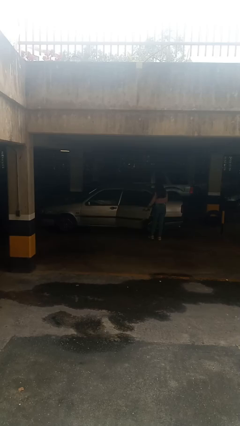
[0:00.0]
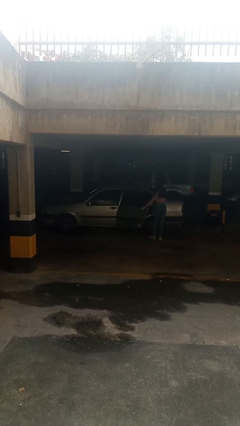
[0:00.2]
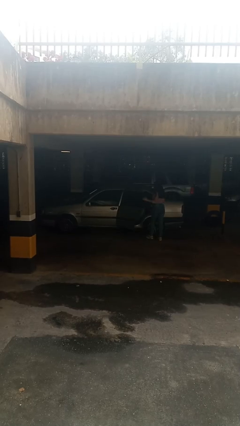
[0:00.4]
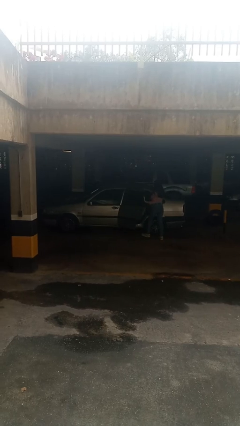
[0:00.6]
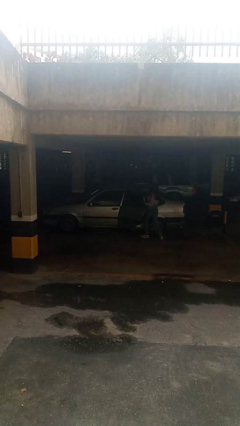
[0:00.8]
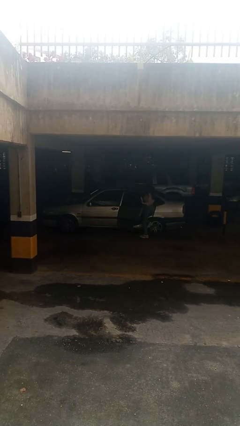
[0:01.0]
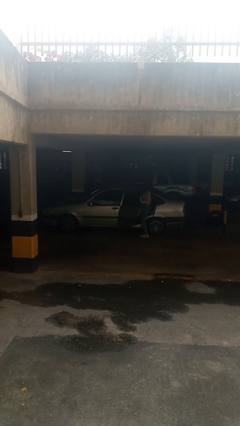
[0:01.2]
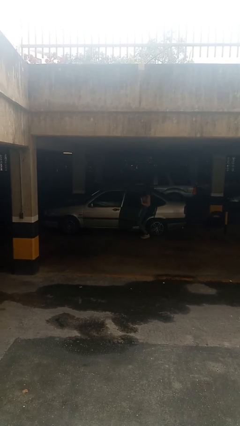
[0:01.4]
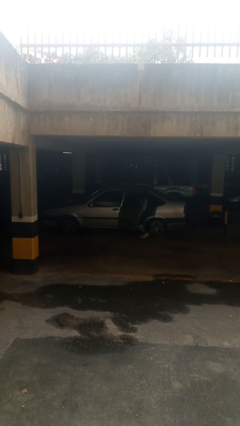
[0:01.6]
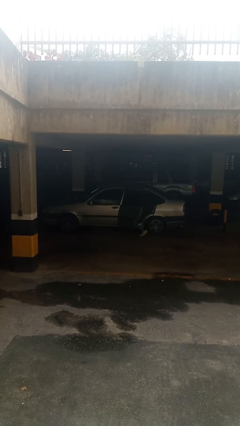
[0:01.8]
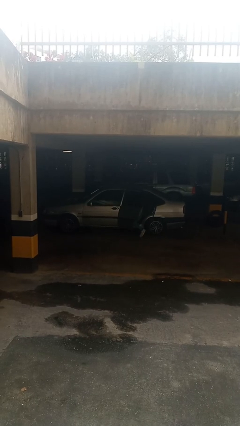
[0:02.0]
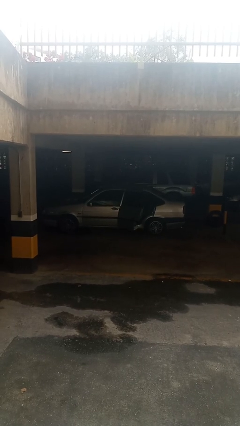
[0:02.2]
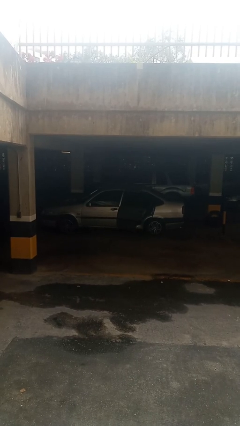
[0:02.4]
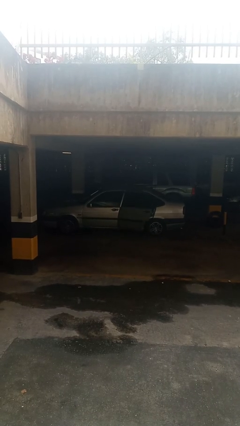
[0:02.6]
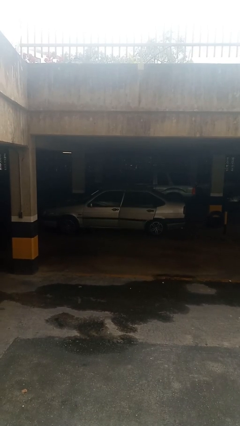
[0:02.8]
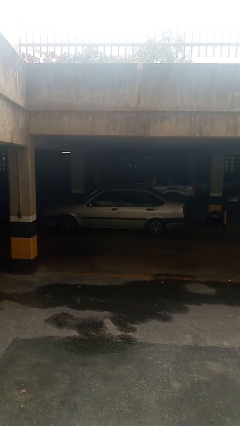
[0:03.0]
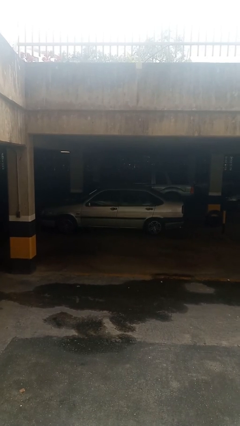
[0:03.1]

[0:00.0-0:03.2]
car picks up person

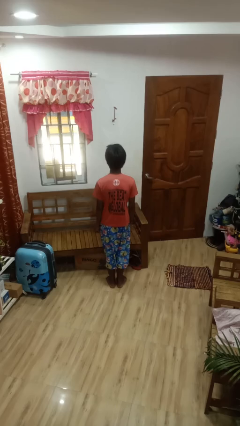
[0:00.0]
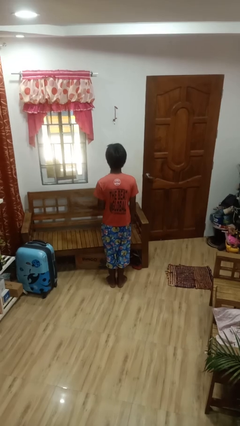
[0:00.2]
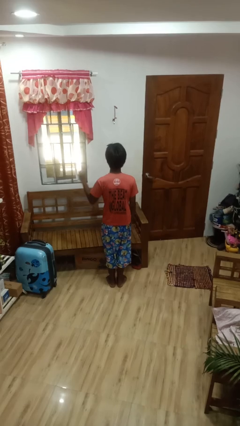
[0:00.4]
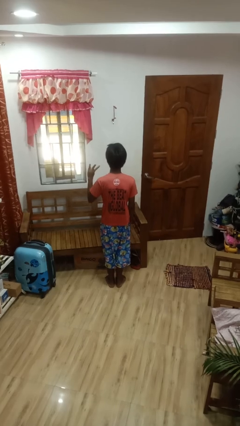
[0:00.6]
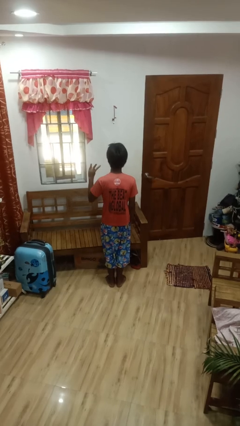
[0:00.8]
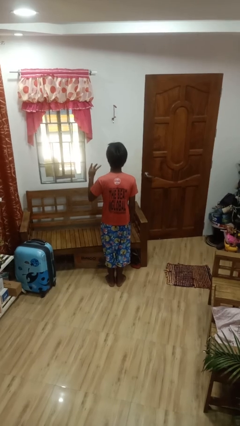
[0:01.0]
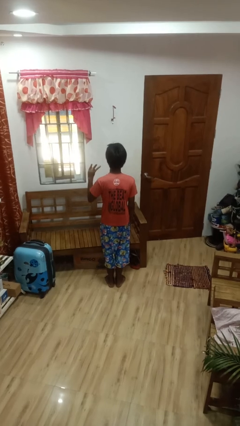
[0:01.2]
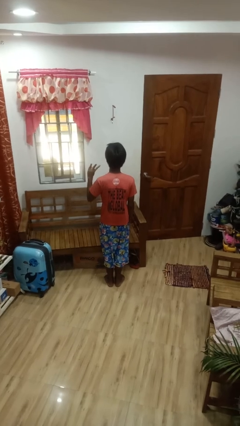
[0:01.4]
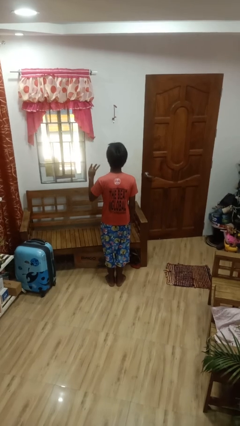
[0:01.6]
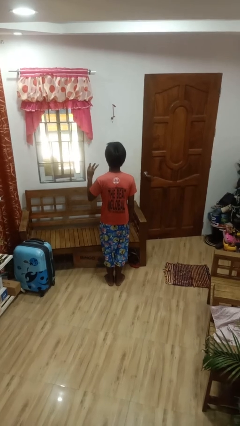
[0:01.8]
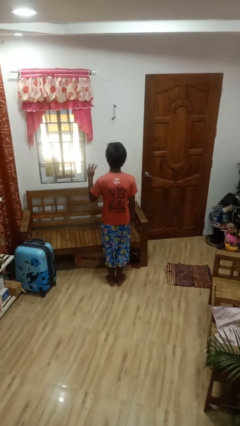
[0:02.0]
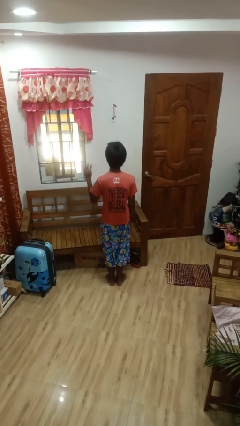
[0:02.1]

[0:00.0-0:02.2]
person gestures number three

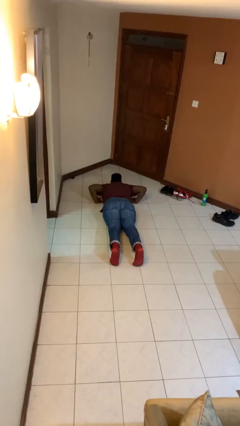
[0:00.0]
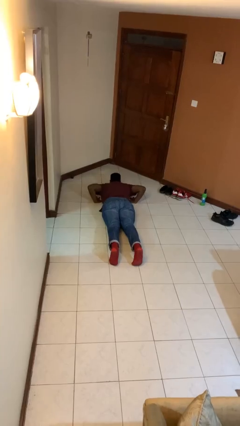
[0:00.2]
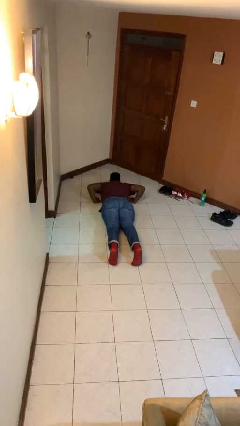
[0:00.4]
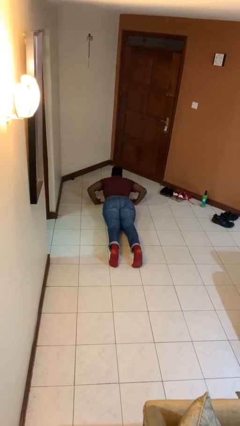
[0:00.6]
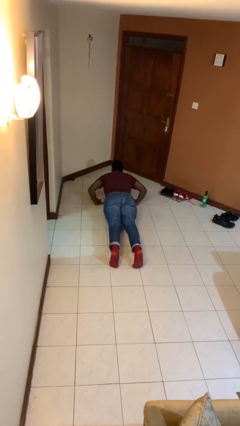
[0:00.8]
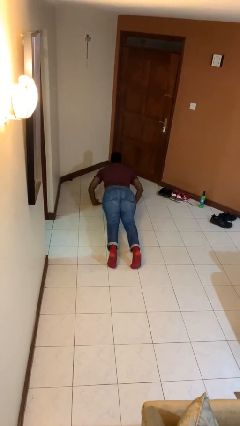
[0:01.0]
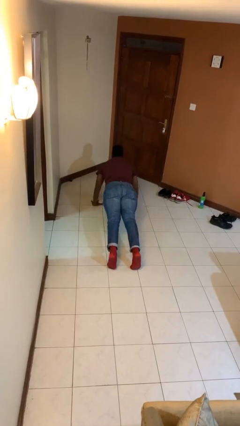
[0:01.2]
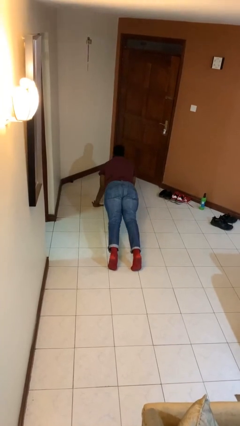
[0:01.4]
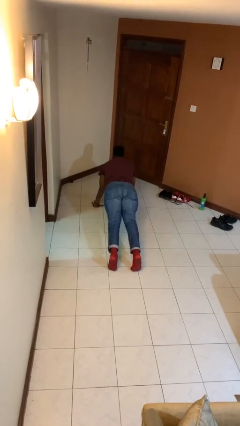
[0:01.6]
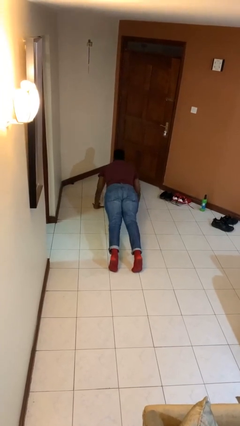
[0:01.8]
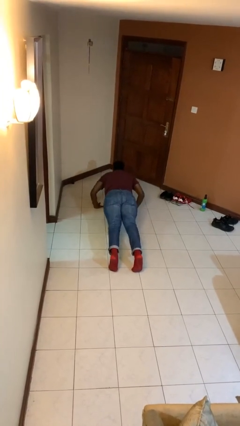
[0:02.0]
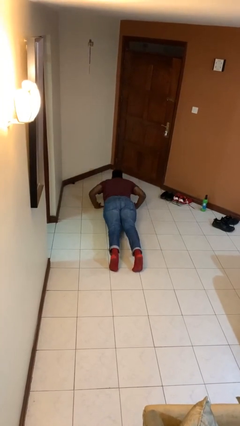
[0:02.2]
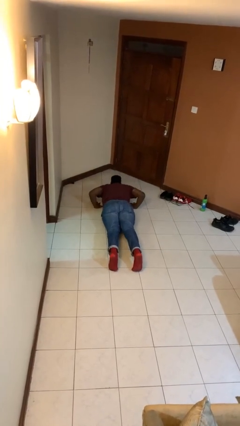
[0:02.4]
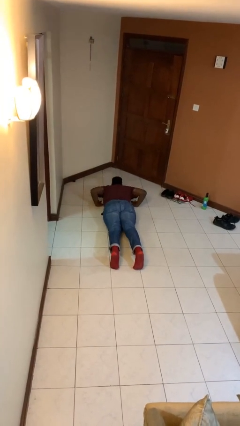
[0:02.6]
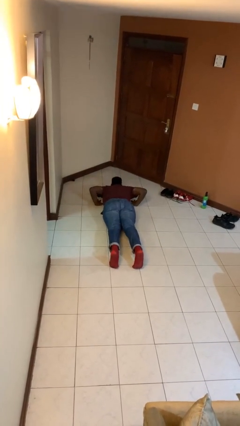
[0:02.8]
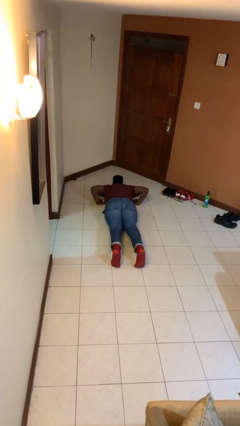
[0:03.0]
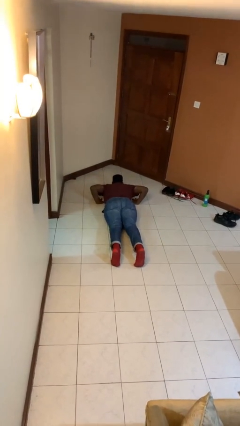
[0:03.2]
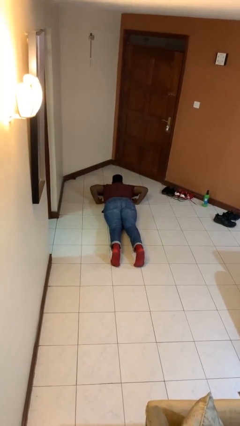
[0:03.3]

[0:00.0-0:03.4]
person exercises with pushup

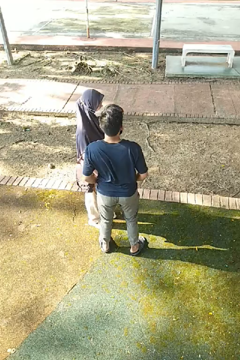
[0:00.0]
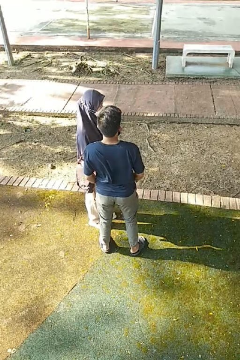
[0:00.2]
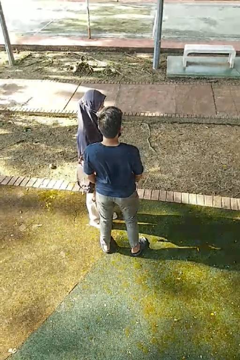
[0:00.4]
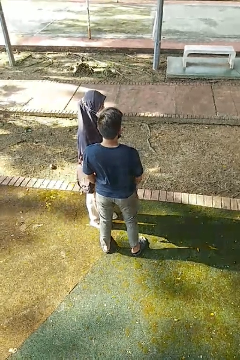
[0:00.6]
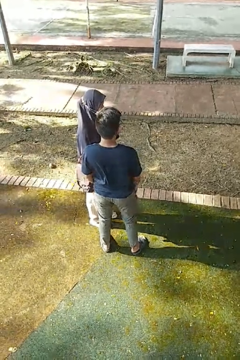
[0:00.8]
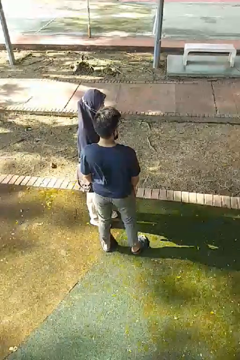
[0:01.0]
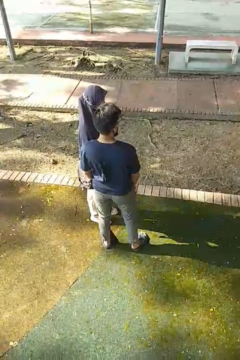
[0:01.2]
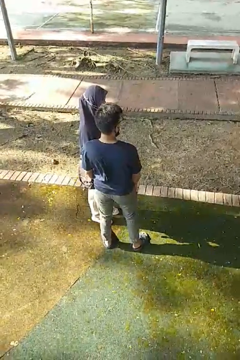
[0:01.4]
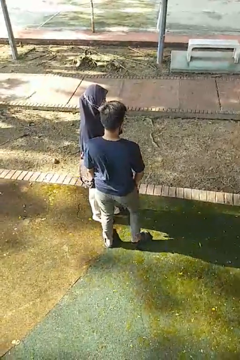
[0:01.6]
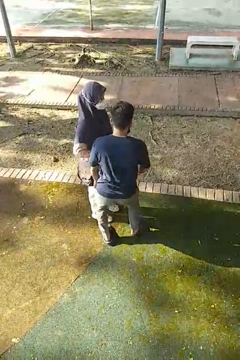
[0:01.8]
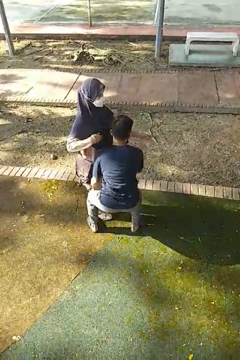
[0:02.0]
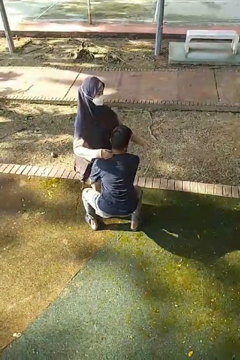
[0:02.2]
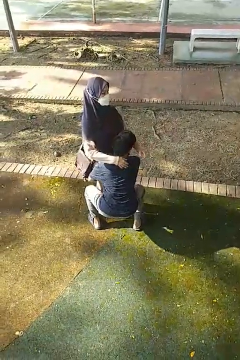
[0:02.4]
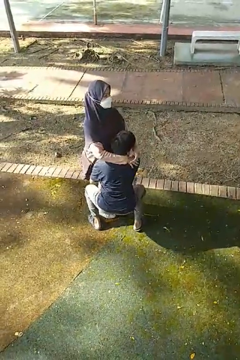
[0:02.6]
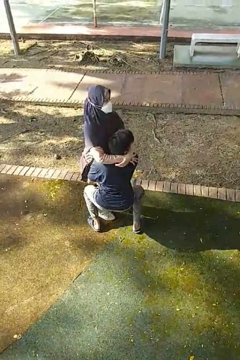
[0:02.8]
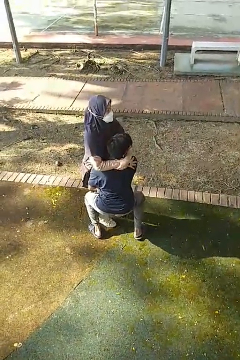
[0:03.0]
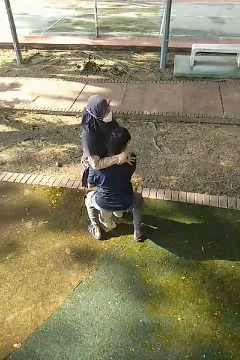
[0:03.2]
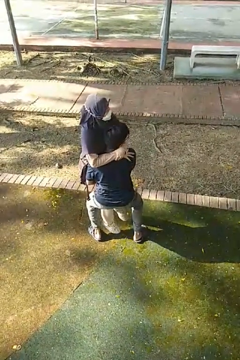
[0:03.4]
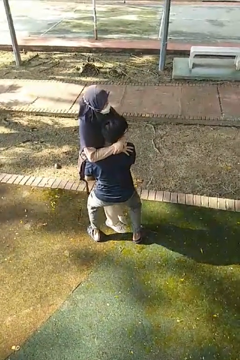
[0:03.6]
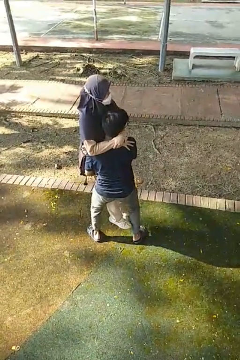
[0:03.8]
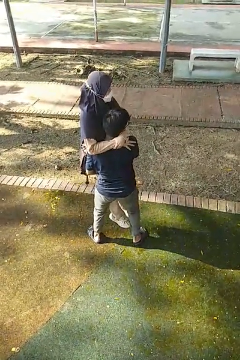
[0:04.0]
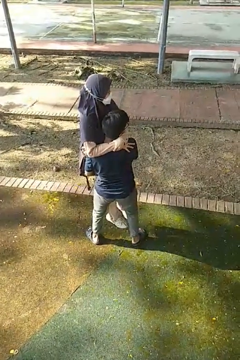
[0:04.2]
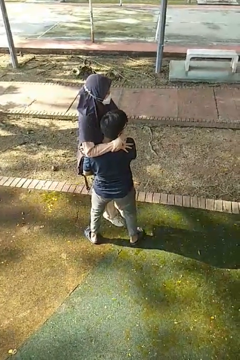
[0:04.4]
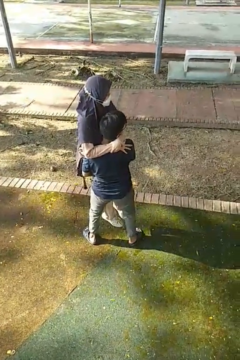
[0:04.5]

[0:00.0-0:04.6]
person picks up person

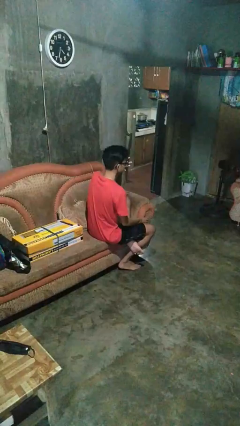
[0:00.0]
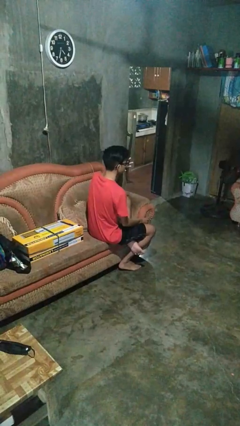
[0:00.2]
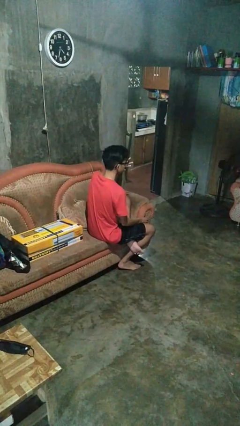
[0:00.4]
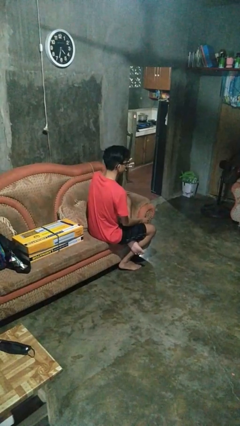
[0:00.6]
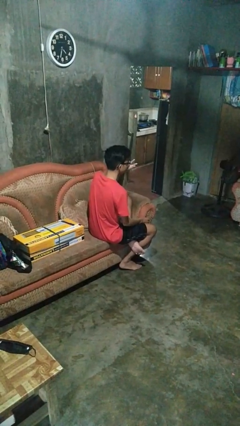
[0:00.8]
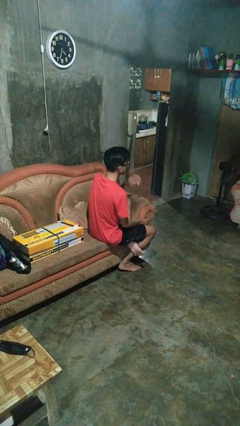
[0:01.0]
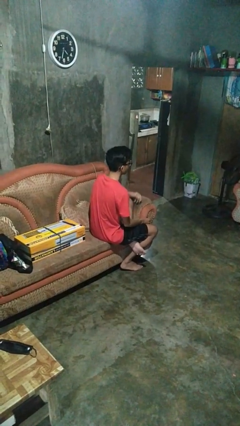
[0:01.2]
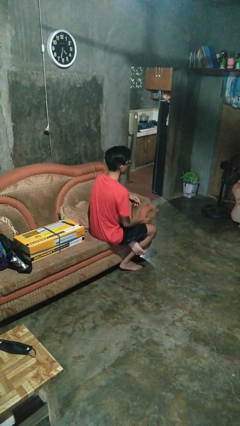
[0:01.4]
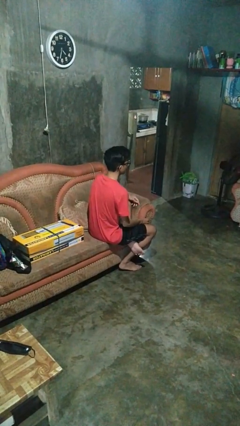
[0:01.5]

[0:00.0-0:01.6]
person licks fingers

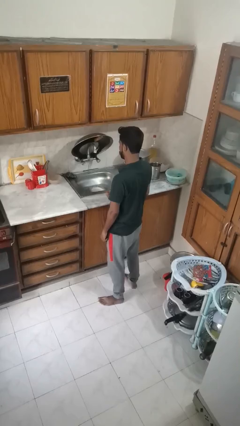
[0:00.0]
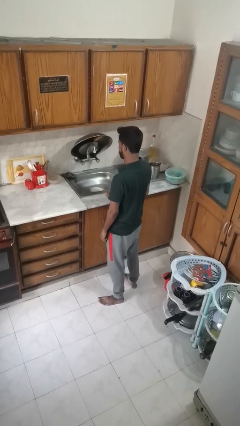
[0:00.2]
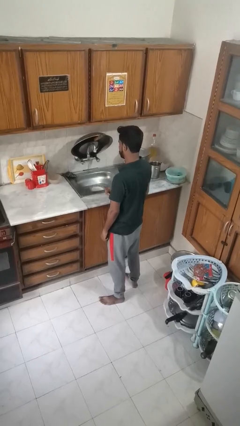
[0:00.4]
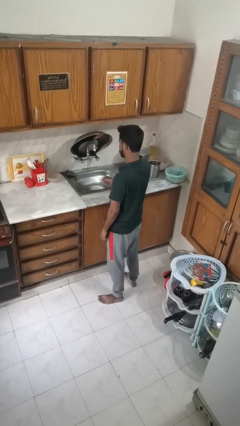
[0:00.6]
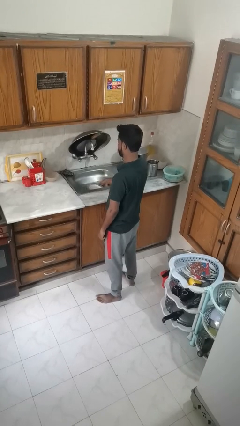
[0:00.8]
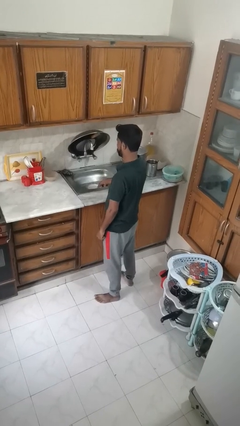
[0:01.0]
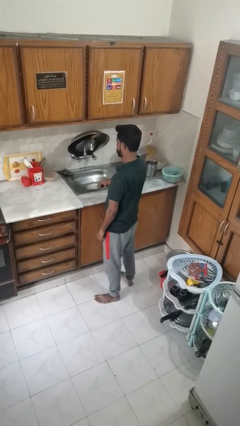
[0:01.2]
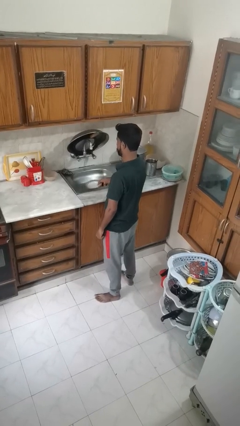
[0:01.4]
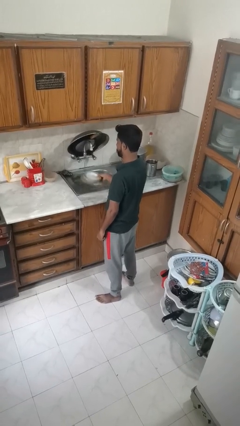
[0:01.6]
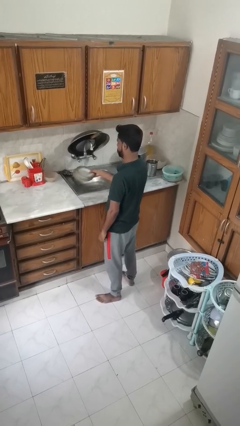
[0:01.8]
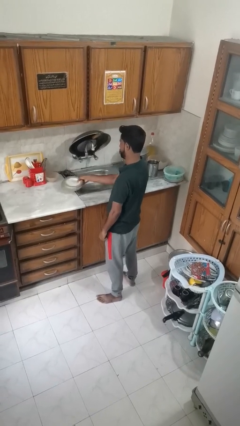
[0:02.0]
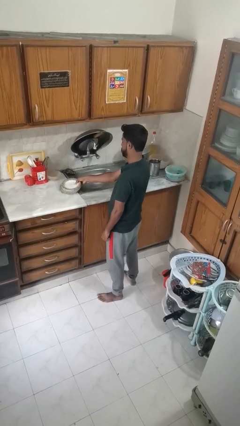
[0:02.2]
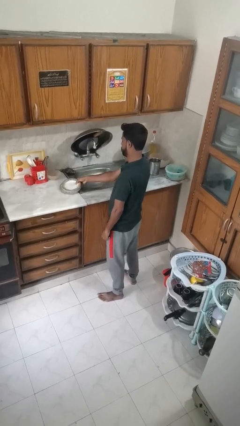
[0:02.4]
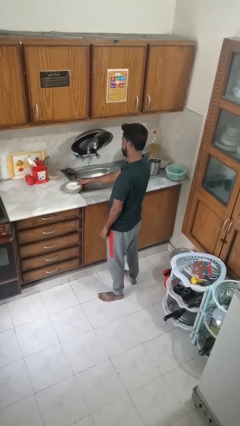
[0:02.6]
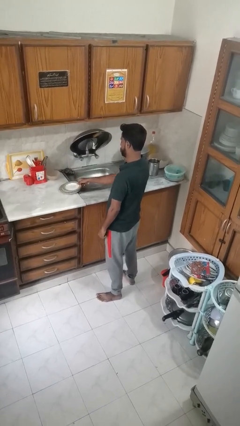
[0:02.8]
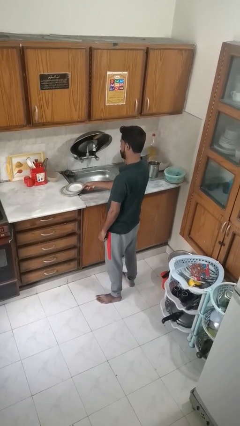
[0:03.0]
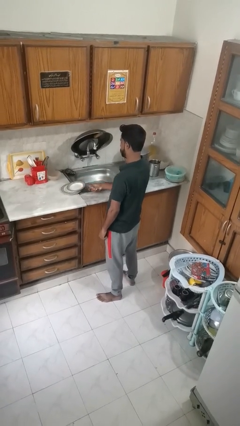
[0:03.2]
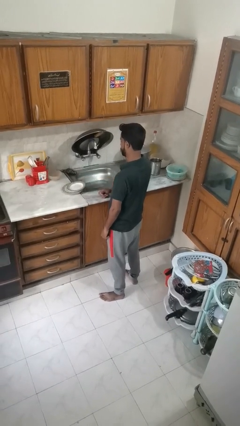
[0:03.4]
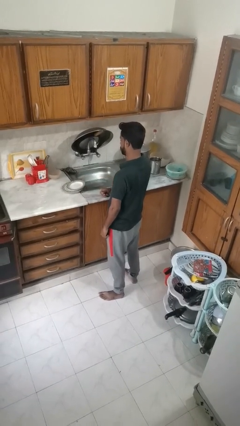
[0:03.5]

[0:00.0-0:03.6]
person closes dishwasher
